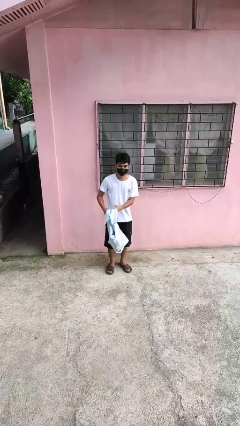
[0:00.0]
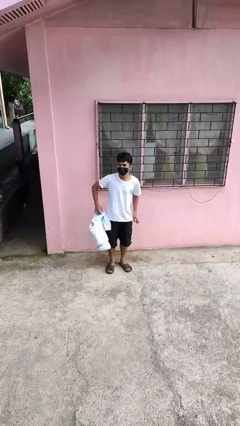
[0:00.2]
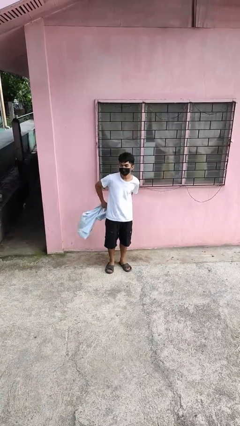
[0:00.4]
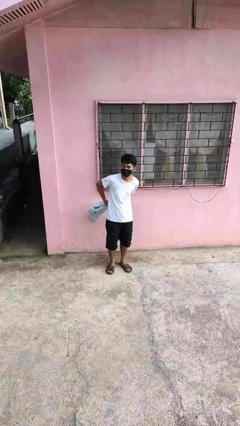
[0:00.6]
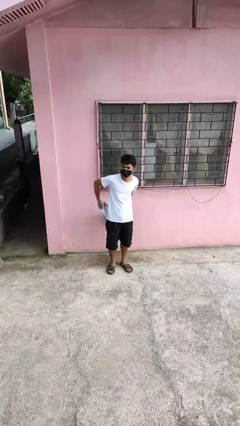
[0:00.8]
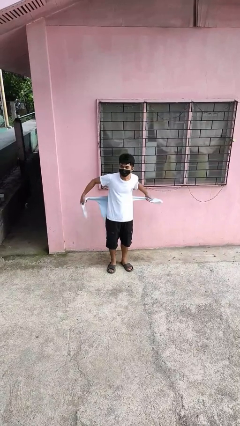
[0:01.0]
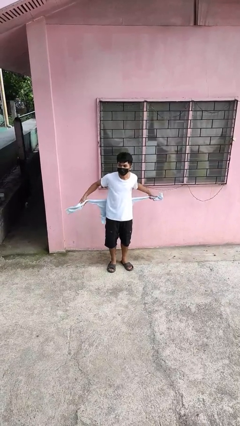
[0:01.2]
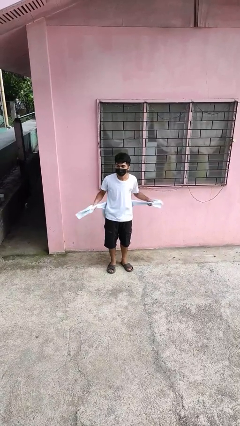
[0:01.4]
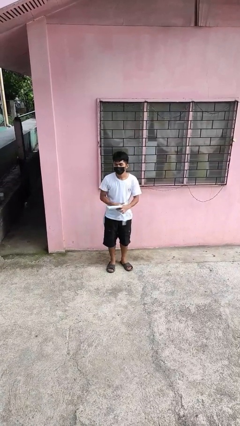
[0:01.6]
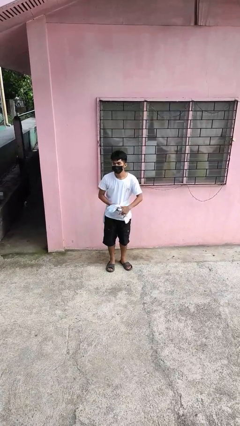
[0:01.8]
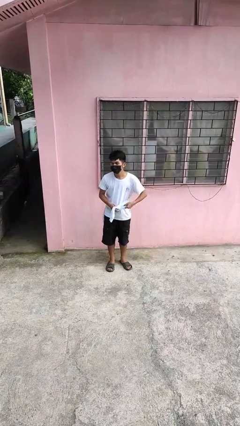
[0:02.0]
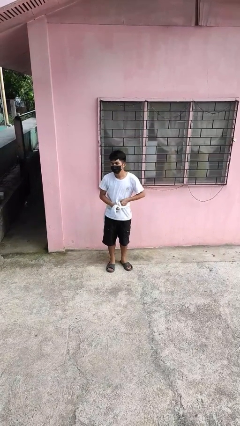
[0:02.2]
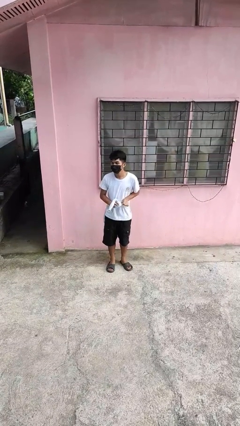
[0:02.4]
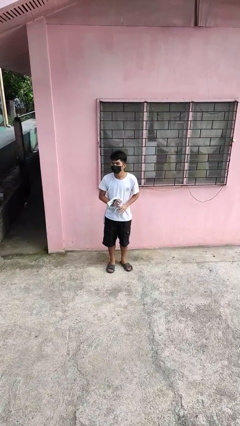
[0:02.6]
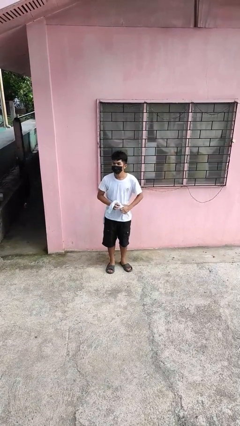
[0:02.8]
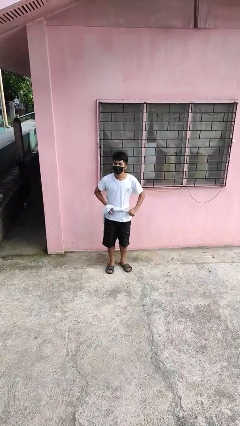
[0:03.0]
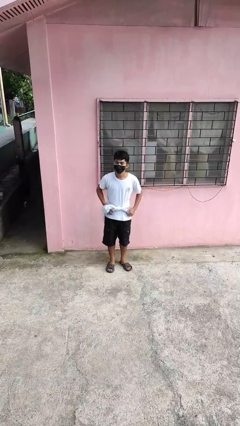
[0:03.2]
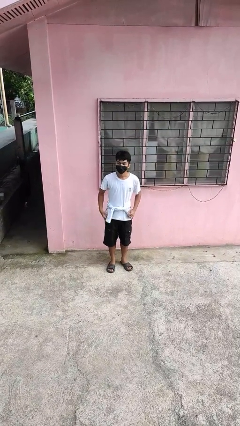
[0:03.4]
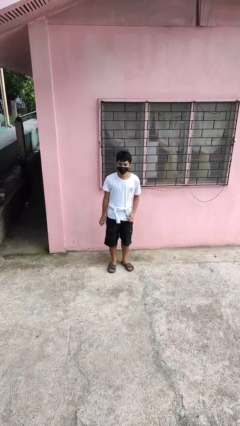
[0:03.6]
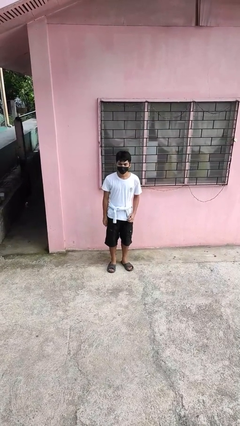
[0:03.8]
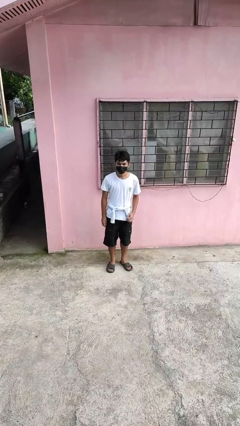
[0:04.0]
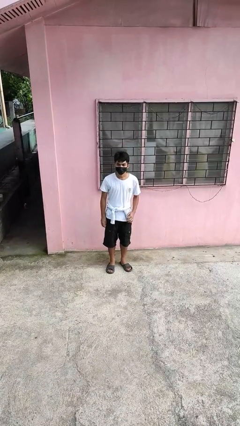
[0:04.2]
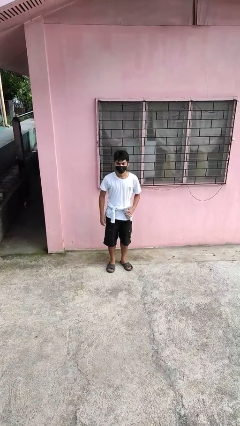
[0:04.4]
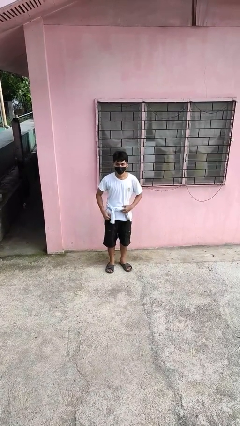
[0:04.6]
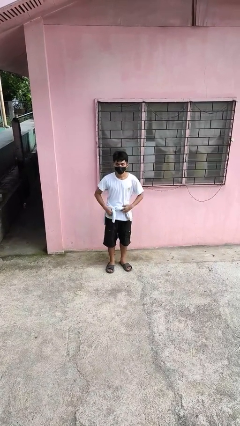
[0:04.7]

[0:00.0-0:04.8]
person ties jacket around waist

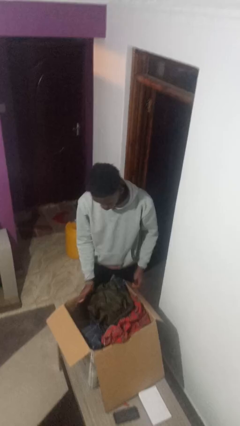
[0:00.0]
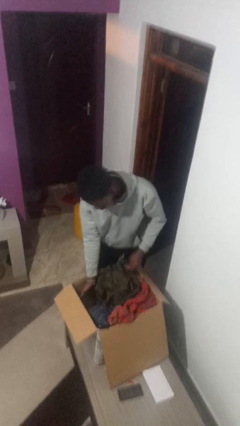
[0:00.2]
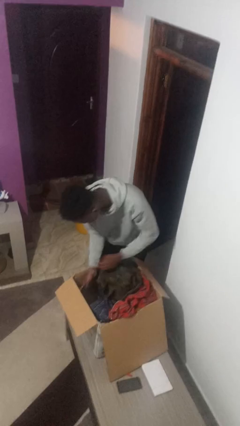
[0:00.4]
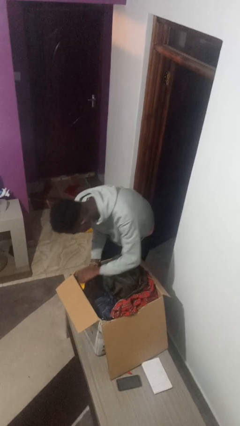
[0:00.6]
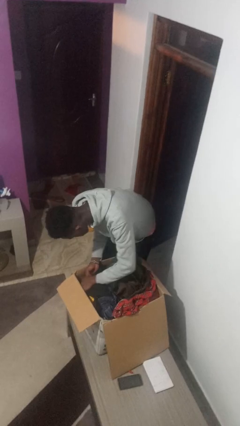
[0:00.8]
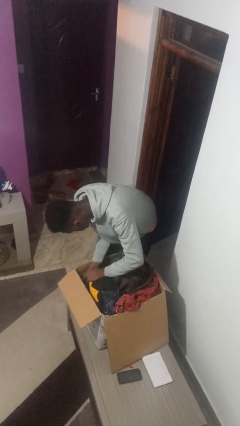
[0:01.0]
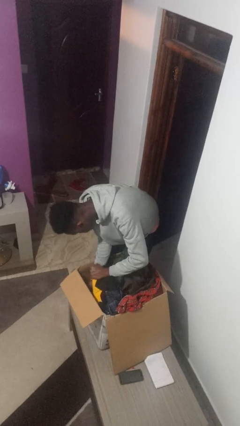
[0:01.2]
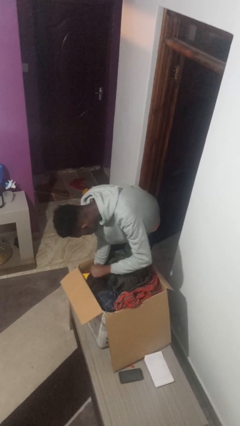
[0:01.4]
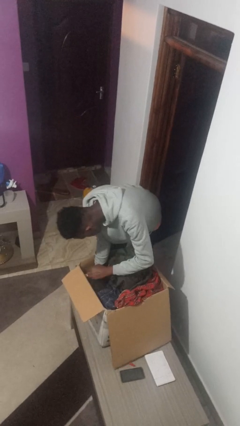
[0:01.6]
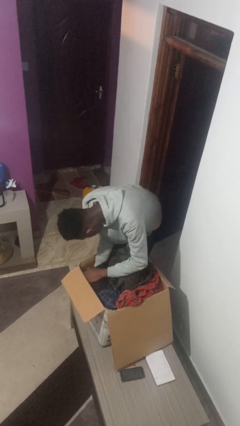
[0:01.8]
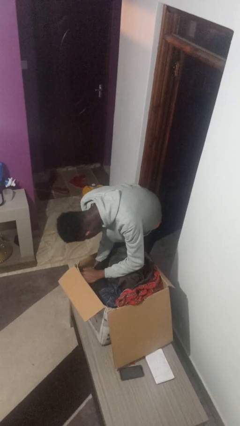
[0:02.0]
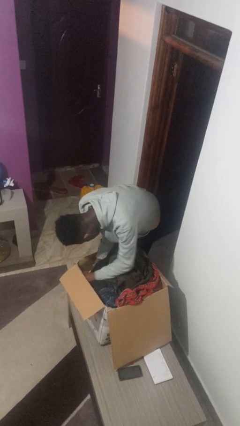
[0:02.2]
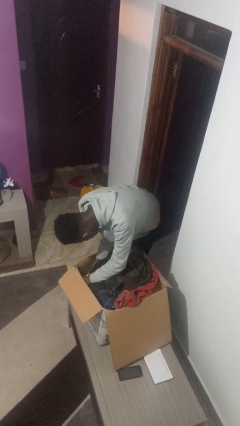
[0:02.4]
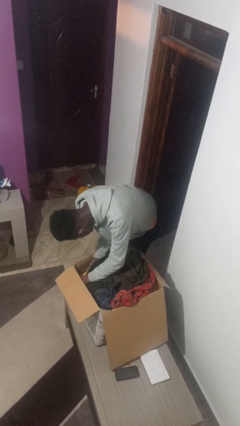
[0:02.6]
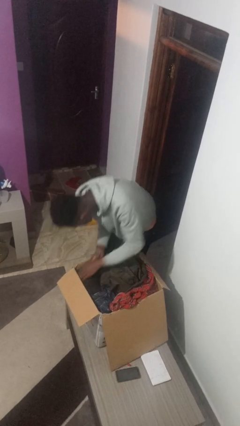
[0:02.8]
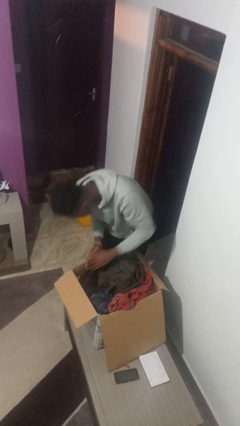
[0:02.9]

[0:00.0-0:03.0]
person searches in box

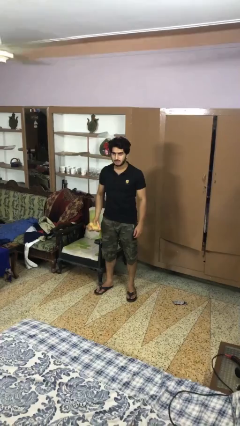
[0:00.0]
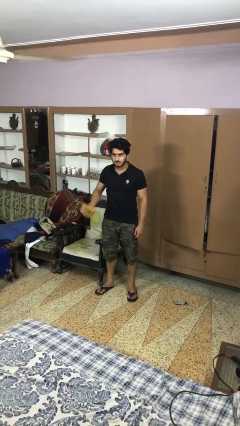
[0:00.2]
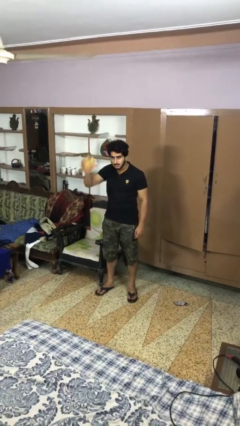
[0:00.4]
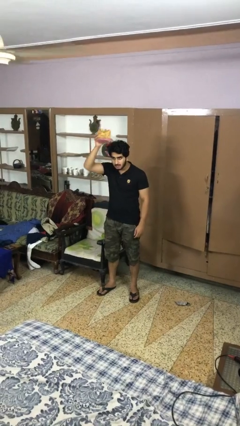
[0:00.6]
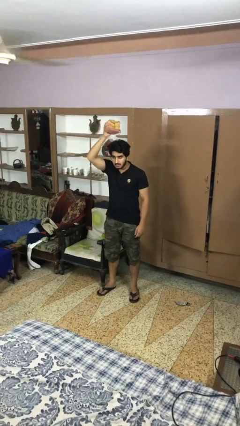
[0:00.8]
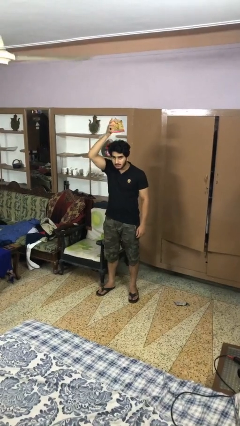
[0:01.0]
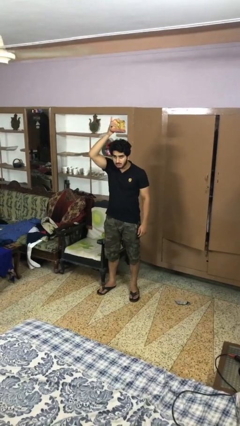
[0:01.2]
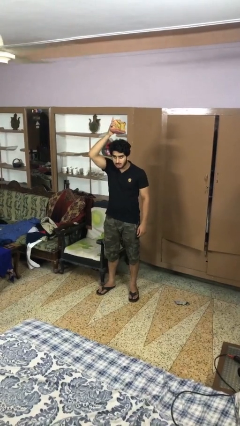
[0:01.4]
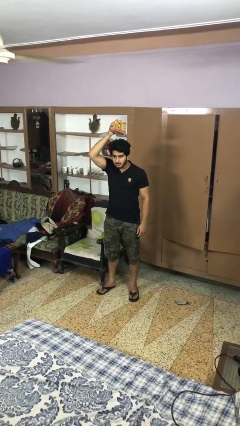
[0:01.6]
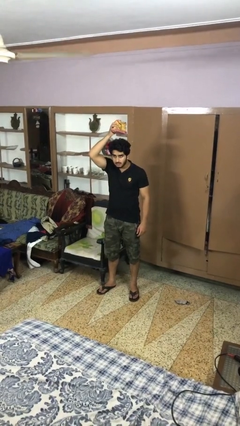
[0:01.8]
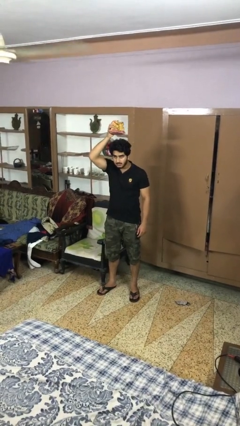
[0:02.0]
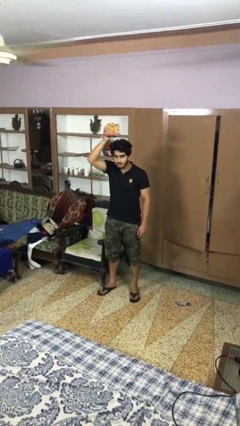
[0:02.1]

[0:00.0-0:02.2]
person holds object above head

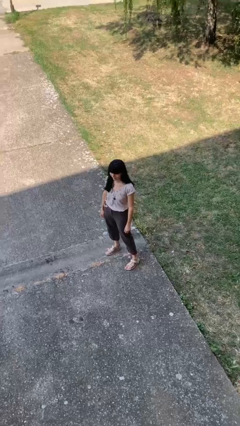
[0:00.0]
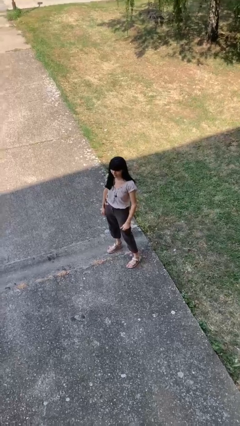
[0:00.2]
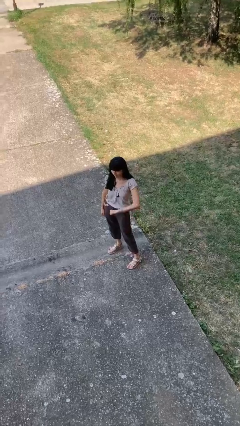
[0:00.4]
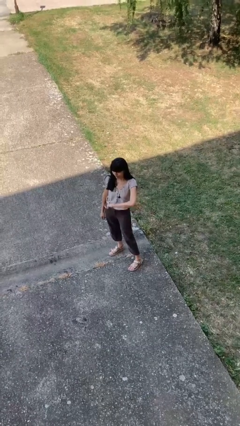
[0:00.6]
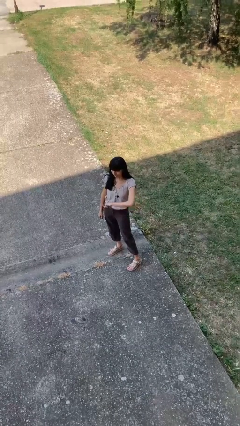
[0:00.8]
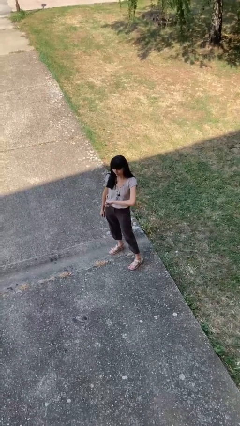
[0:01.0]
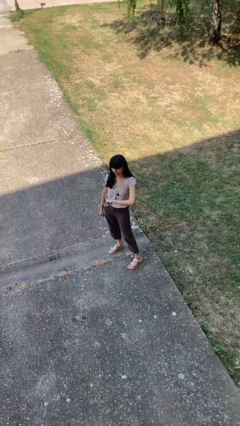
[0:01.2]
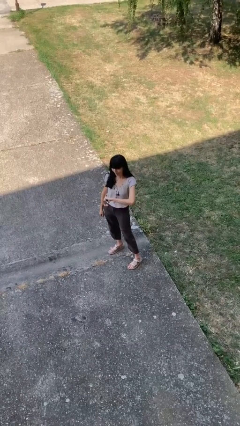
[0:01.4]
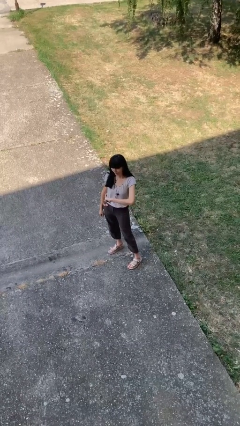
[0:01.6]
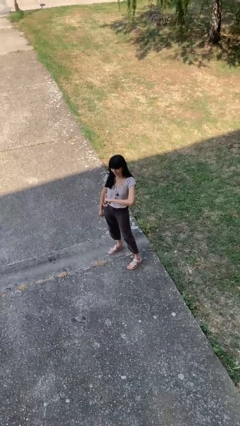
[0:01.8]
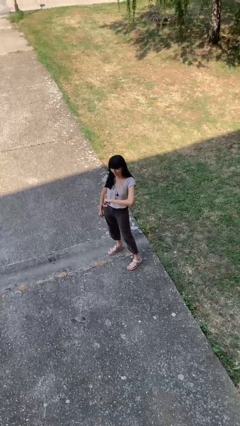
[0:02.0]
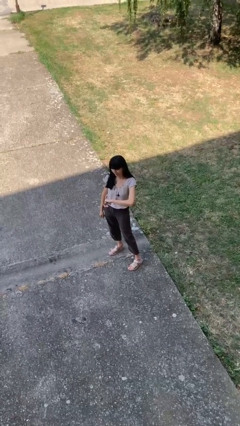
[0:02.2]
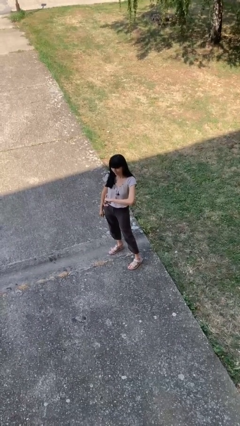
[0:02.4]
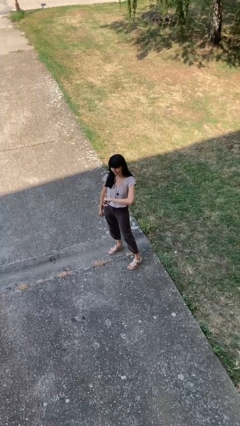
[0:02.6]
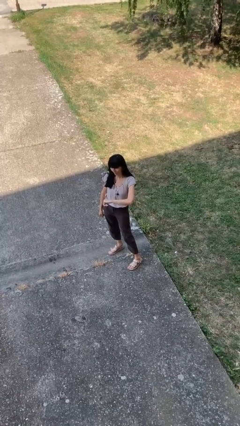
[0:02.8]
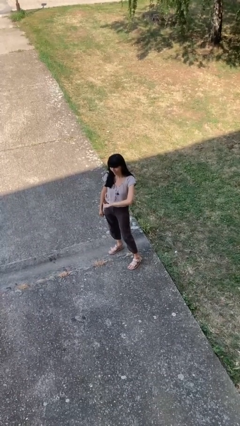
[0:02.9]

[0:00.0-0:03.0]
person gestures thumbs down

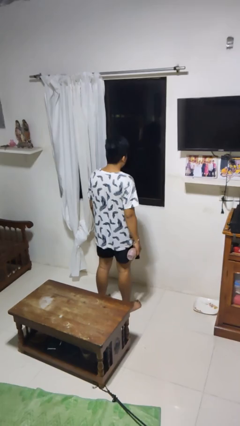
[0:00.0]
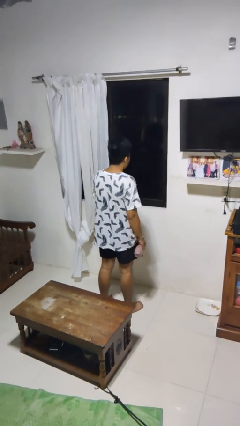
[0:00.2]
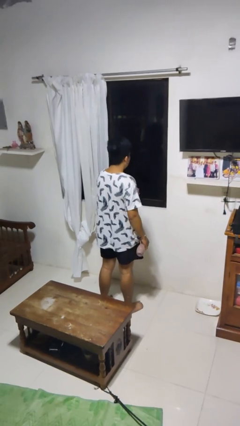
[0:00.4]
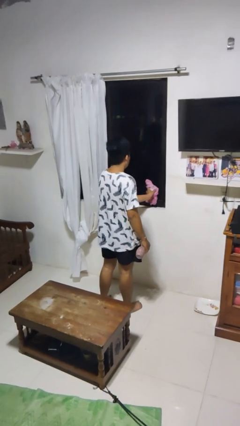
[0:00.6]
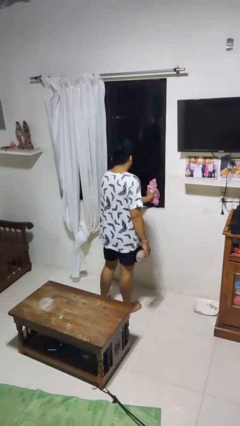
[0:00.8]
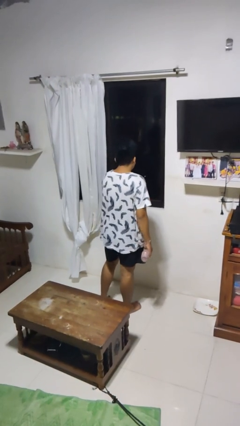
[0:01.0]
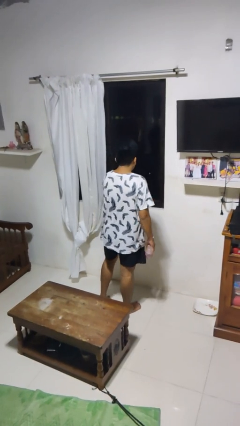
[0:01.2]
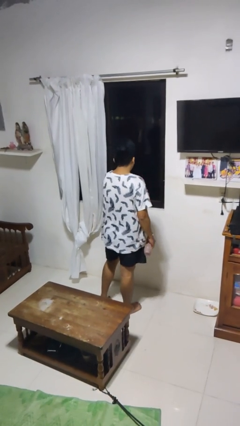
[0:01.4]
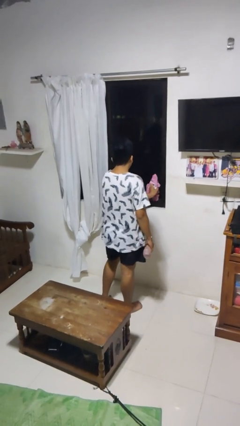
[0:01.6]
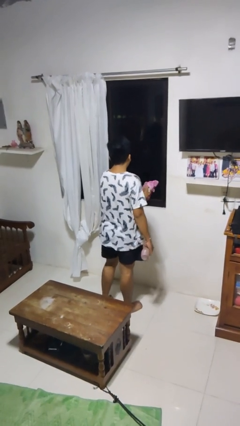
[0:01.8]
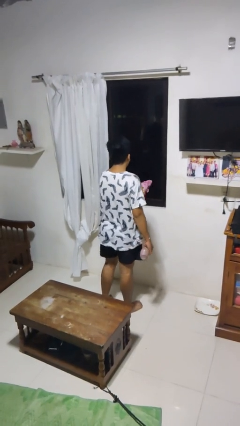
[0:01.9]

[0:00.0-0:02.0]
person washes window

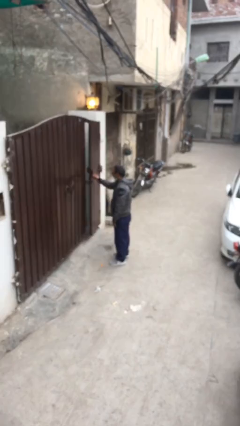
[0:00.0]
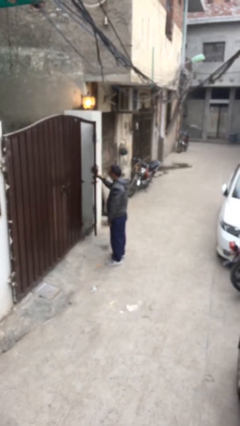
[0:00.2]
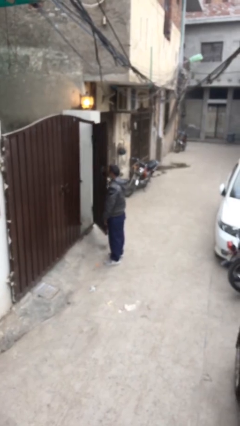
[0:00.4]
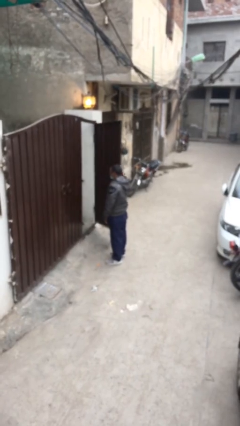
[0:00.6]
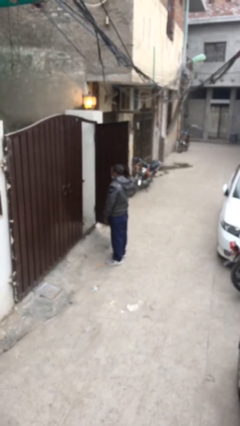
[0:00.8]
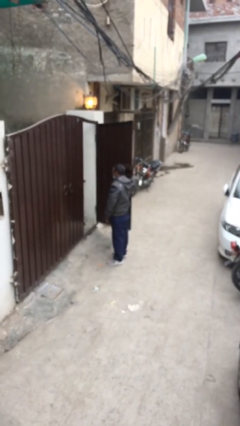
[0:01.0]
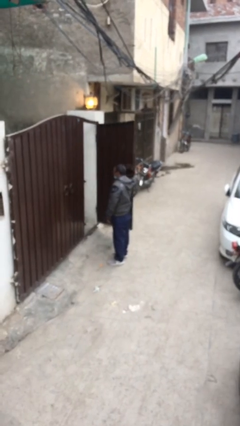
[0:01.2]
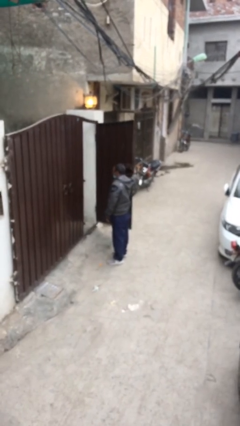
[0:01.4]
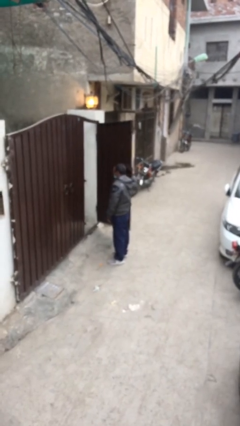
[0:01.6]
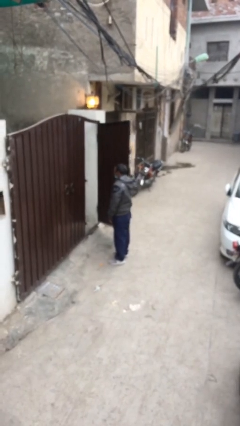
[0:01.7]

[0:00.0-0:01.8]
person opens facility door

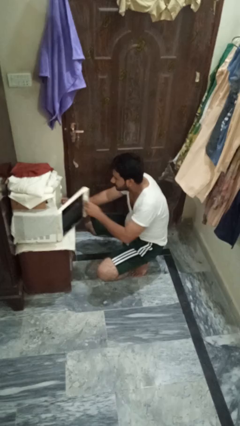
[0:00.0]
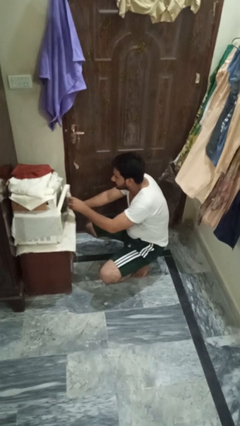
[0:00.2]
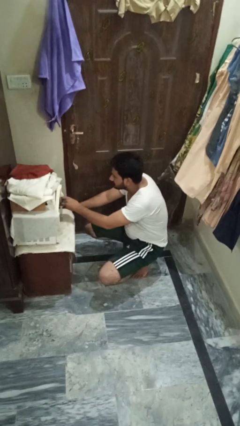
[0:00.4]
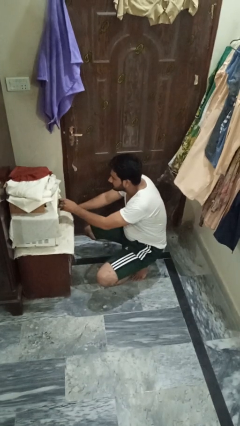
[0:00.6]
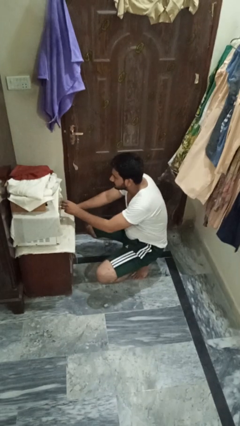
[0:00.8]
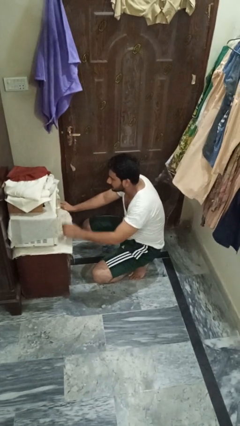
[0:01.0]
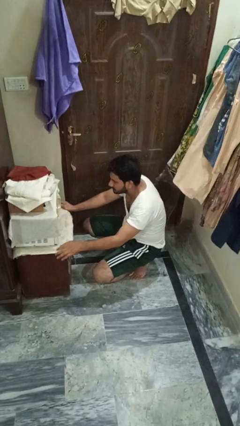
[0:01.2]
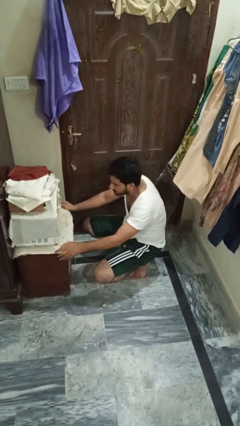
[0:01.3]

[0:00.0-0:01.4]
person closes oven door
